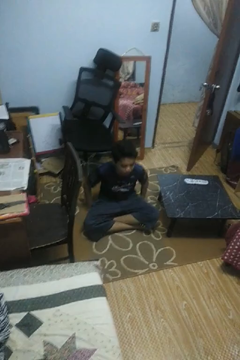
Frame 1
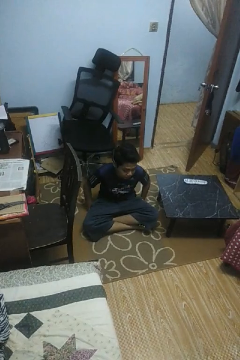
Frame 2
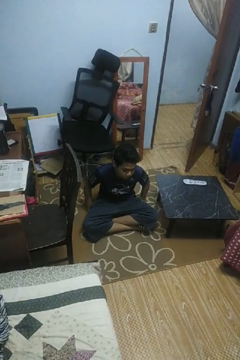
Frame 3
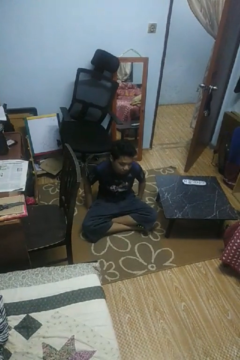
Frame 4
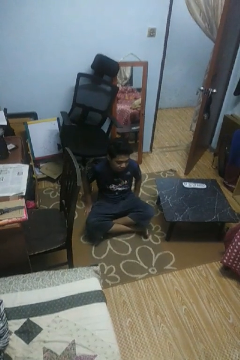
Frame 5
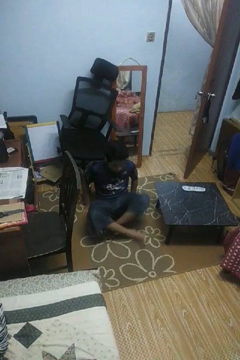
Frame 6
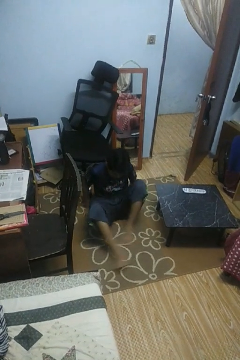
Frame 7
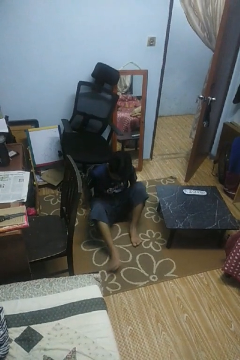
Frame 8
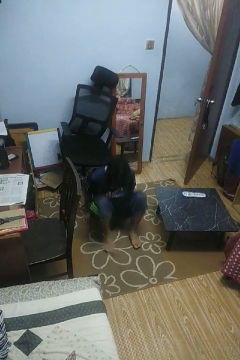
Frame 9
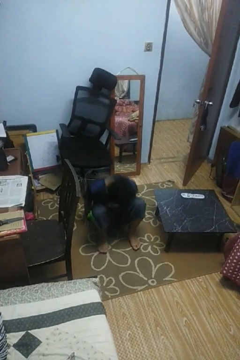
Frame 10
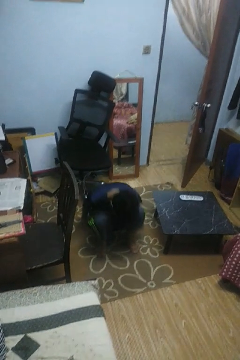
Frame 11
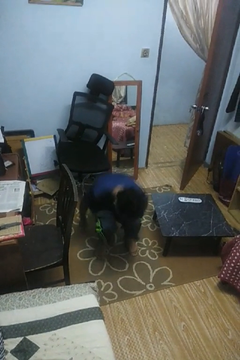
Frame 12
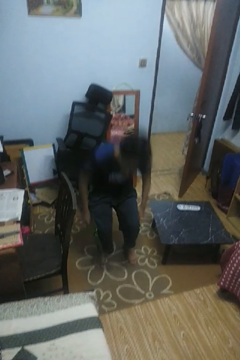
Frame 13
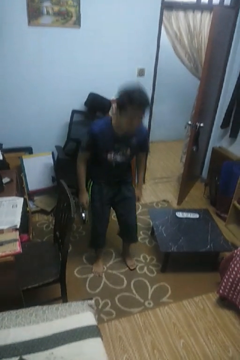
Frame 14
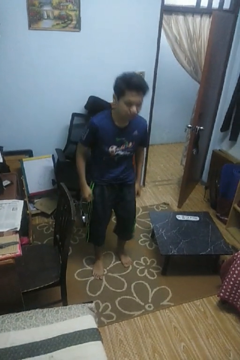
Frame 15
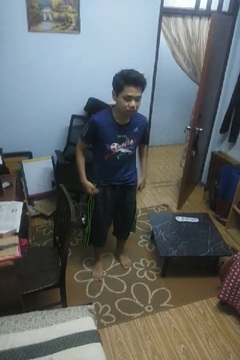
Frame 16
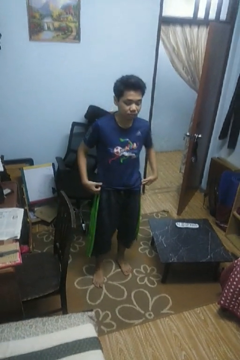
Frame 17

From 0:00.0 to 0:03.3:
person stands up from floor

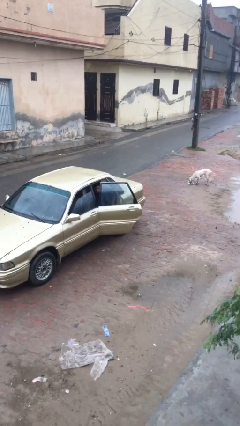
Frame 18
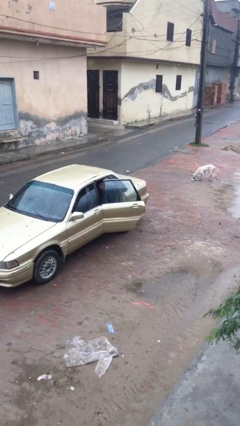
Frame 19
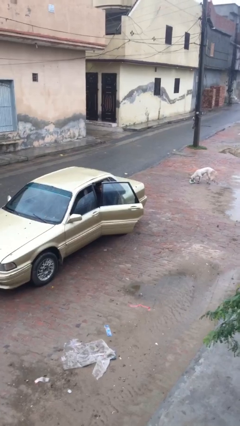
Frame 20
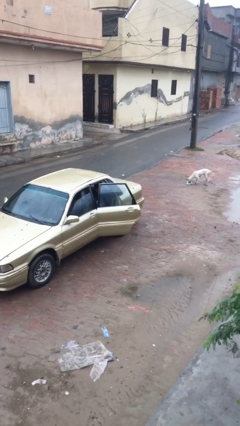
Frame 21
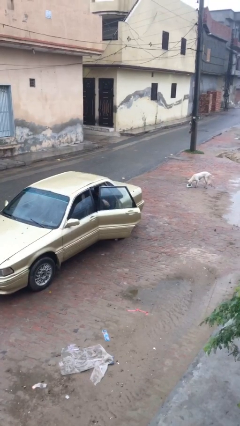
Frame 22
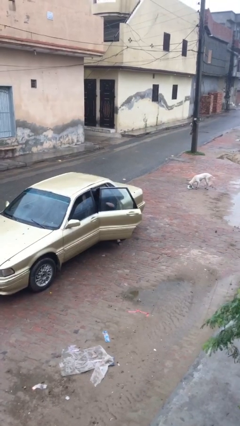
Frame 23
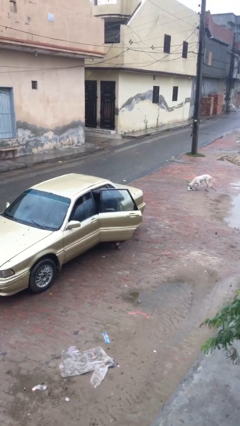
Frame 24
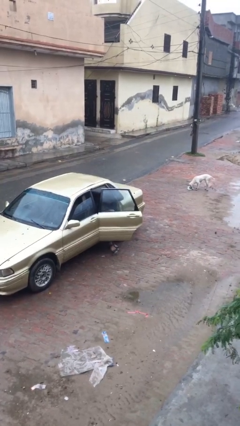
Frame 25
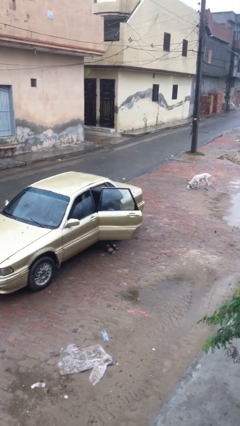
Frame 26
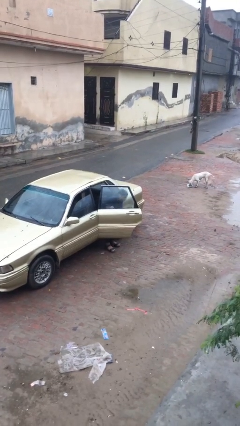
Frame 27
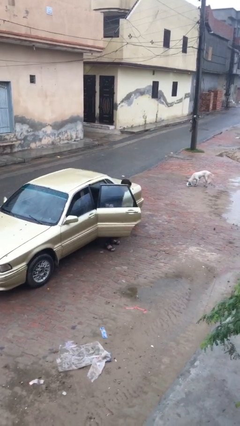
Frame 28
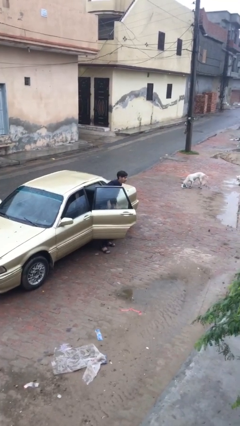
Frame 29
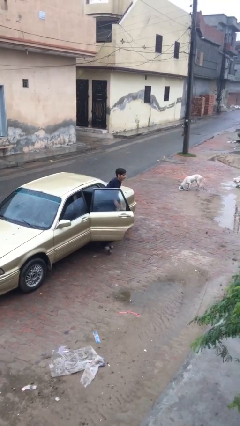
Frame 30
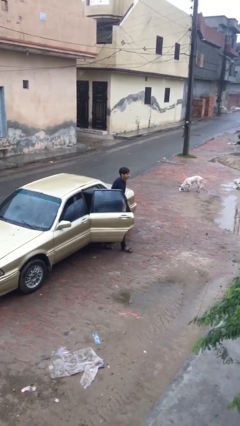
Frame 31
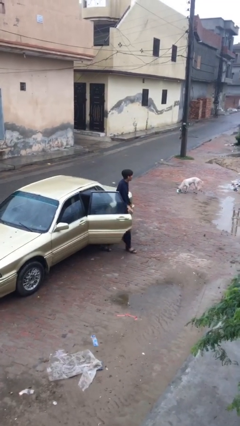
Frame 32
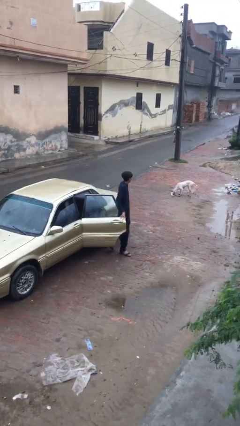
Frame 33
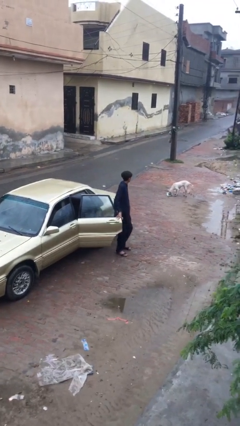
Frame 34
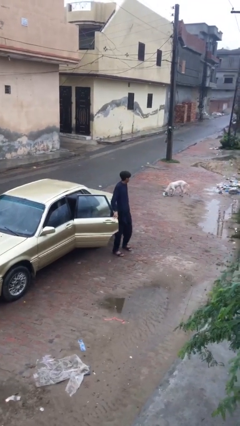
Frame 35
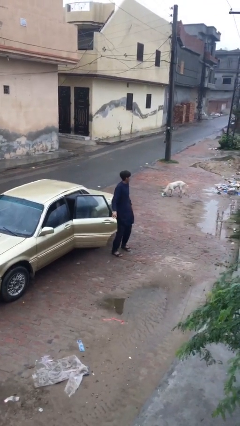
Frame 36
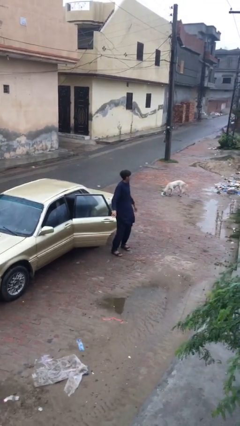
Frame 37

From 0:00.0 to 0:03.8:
person exits car

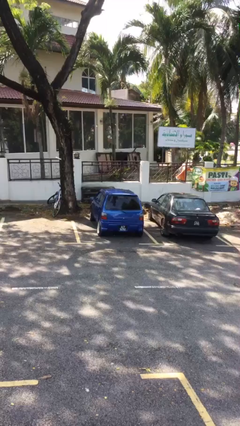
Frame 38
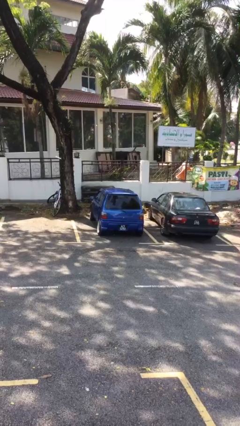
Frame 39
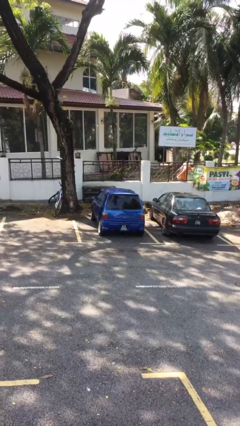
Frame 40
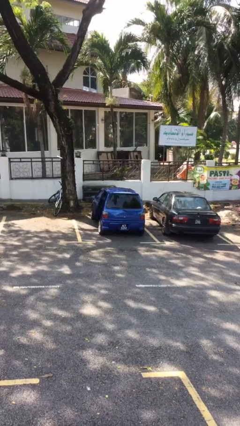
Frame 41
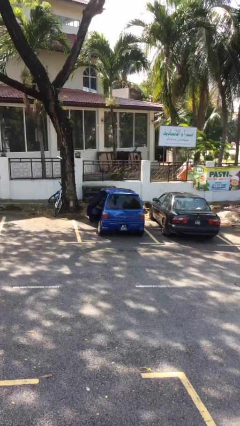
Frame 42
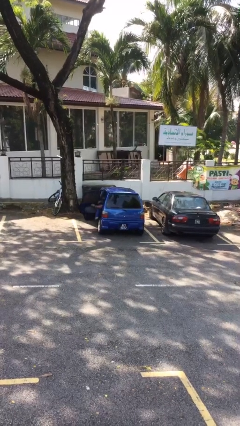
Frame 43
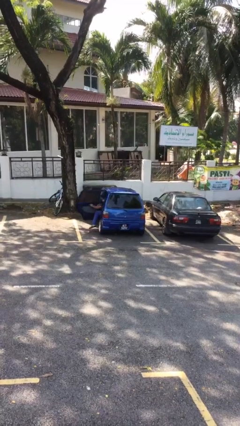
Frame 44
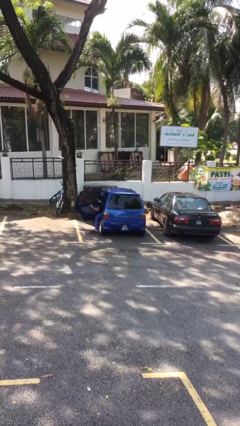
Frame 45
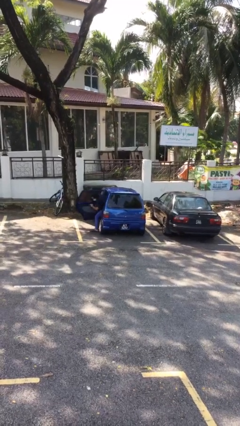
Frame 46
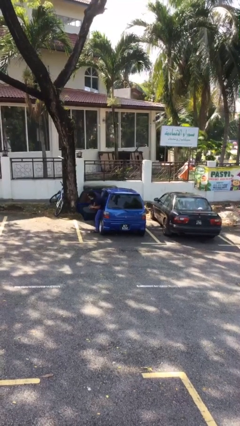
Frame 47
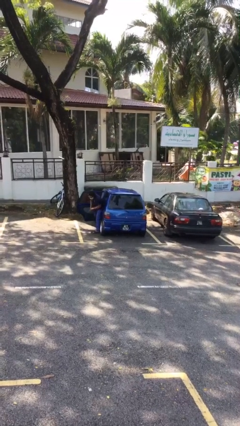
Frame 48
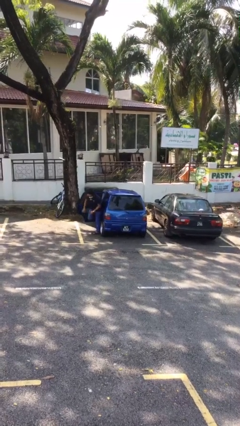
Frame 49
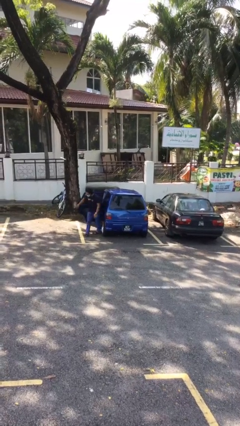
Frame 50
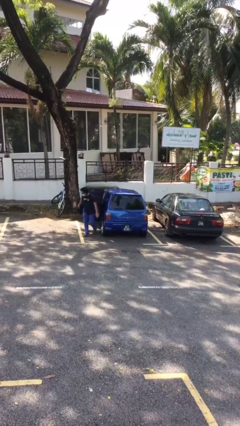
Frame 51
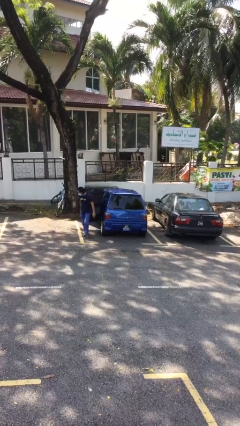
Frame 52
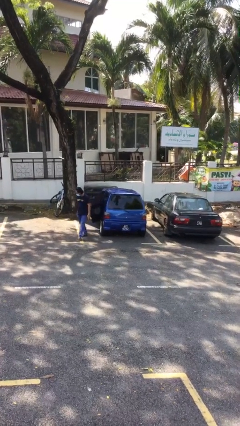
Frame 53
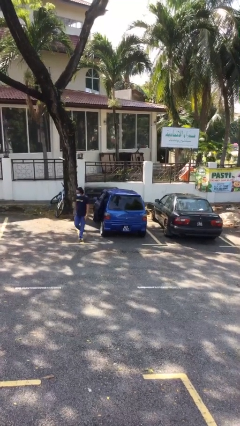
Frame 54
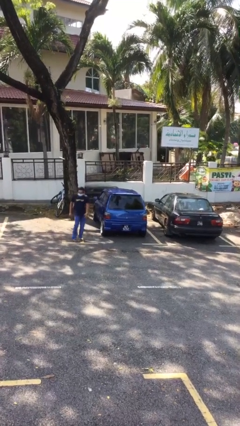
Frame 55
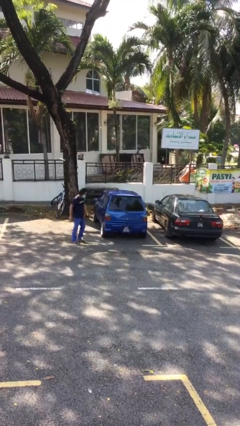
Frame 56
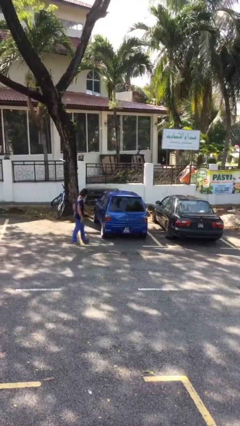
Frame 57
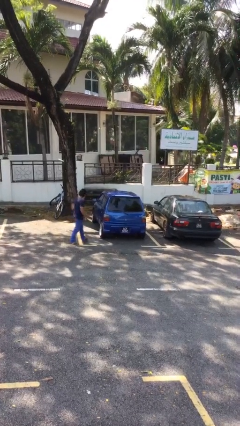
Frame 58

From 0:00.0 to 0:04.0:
car drops off person

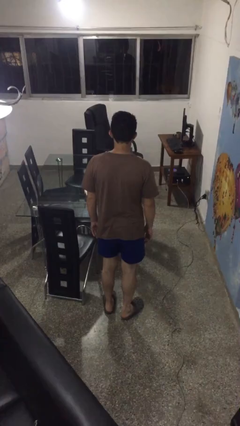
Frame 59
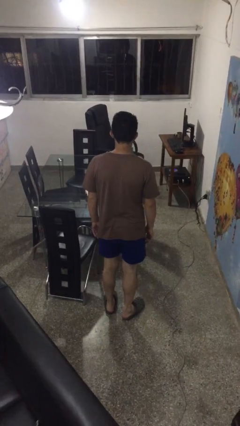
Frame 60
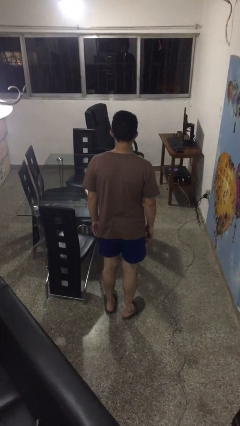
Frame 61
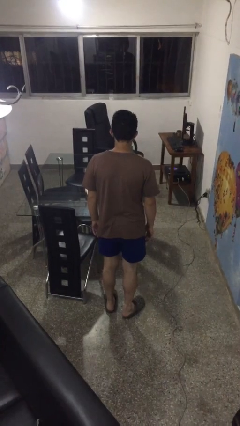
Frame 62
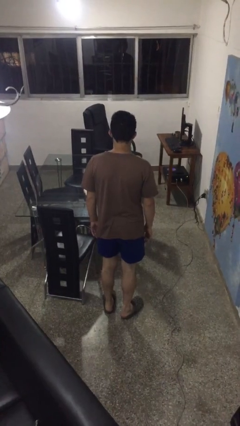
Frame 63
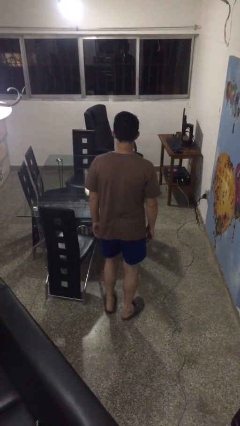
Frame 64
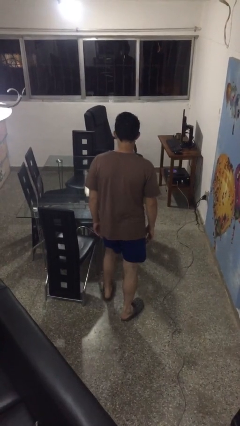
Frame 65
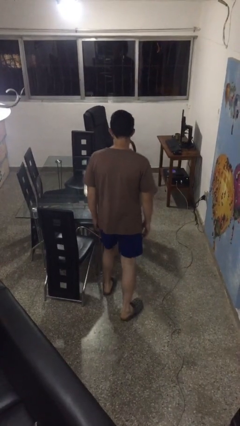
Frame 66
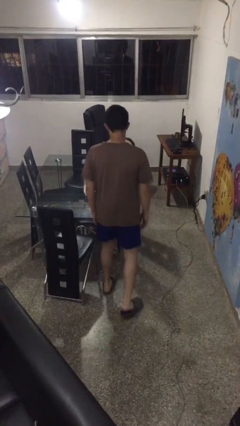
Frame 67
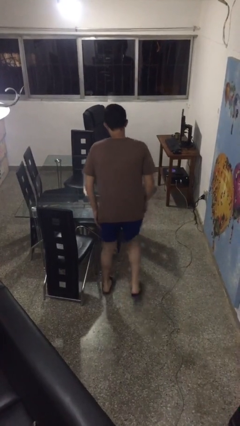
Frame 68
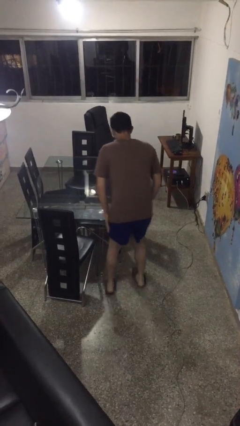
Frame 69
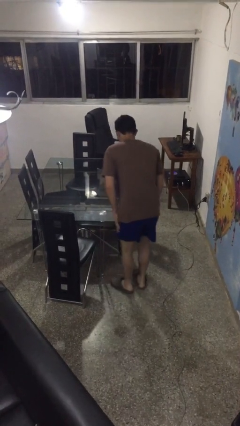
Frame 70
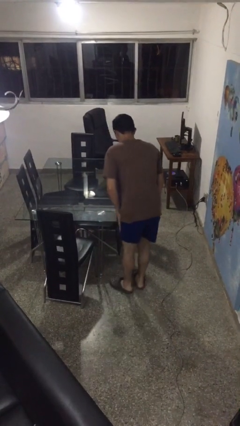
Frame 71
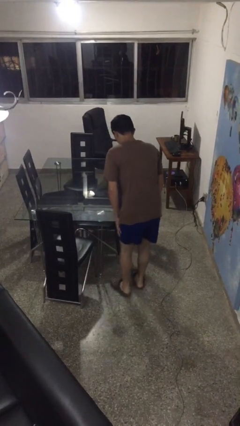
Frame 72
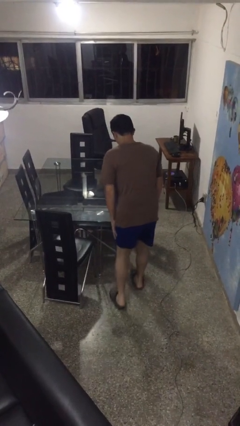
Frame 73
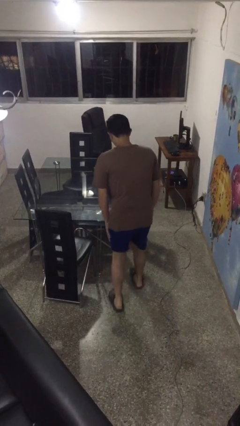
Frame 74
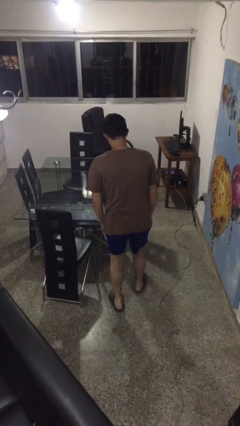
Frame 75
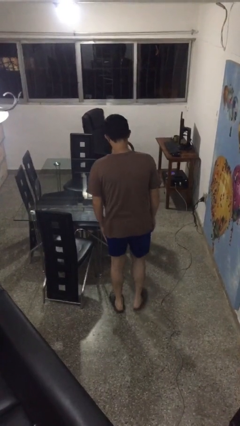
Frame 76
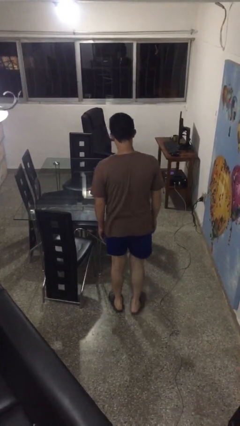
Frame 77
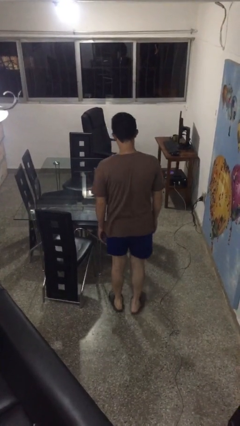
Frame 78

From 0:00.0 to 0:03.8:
person bumps into table

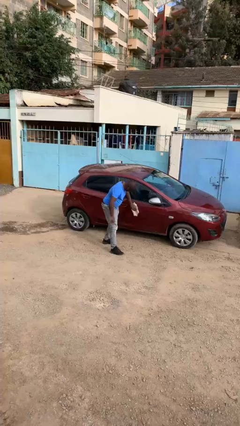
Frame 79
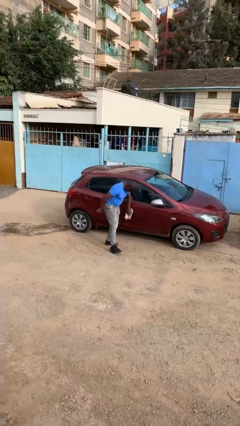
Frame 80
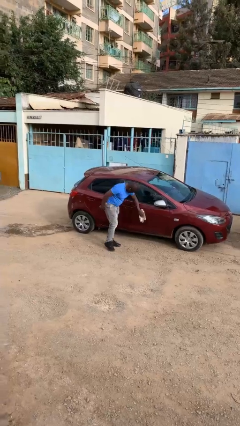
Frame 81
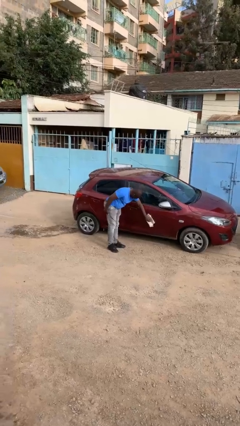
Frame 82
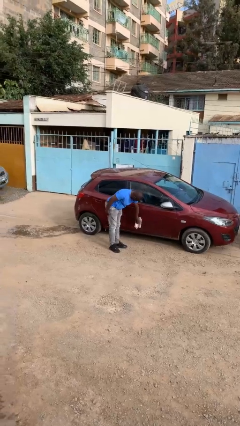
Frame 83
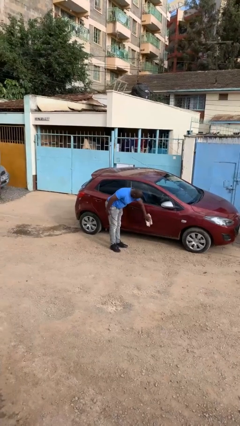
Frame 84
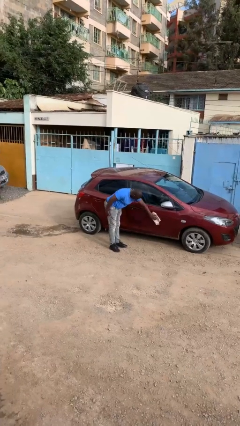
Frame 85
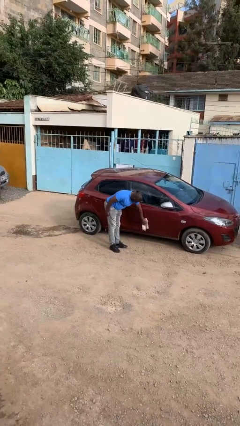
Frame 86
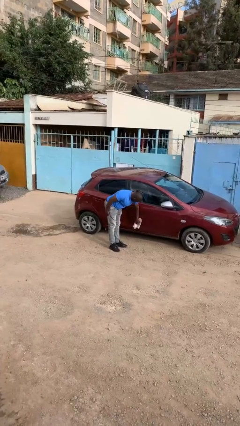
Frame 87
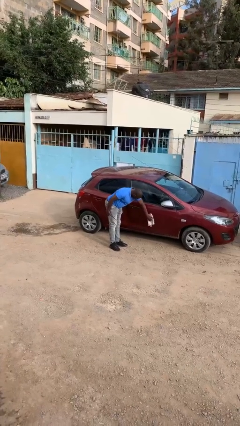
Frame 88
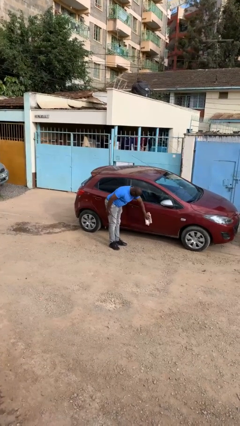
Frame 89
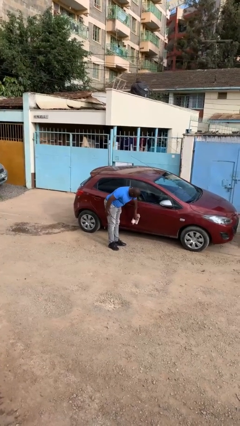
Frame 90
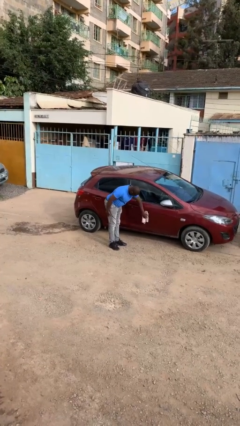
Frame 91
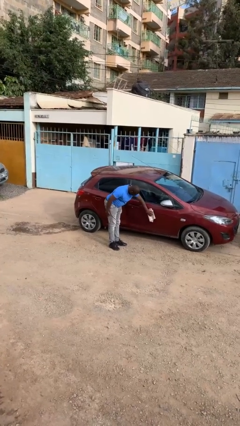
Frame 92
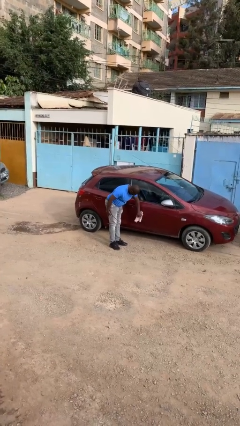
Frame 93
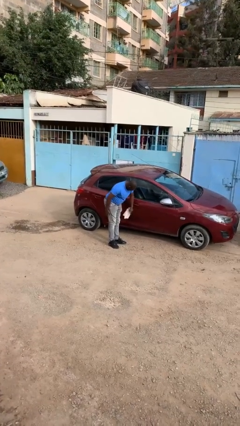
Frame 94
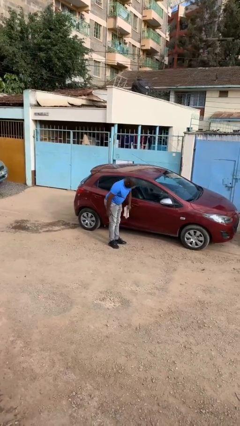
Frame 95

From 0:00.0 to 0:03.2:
person polishes car with rag
